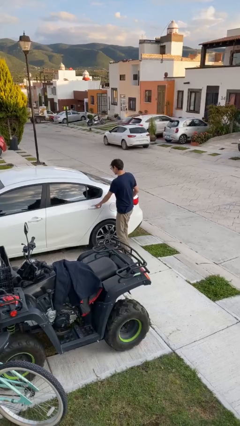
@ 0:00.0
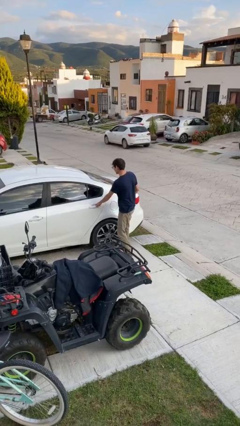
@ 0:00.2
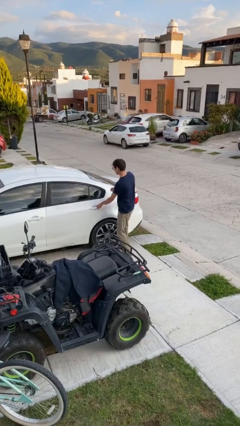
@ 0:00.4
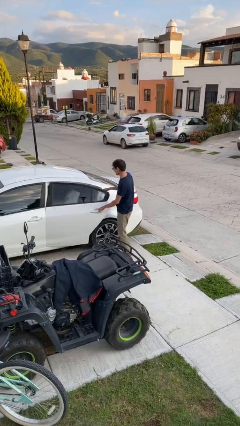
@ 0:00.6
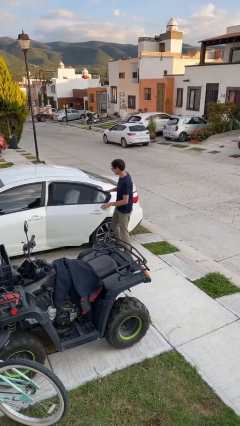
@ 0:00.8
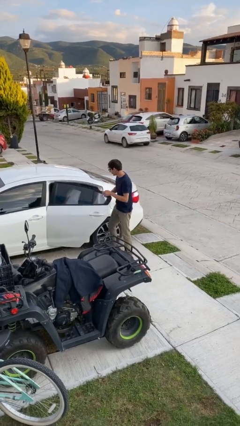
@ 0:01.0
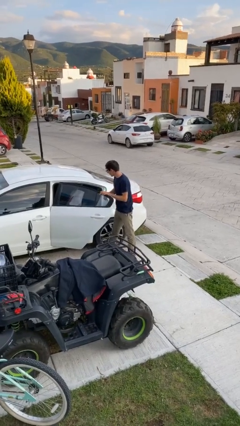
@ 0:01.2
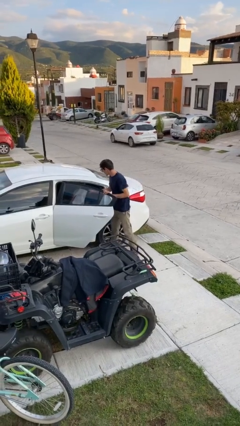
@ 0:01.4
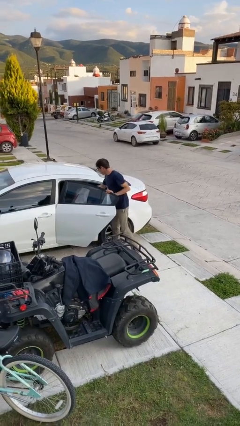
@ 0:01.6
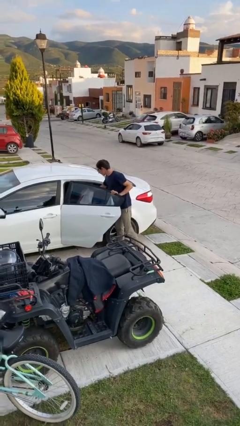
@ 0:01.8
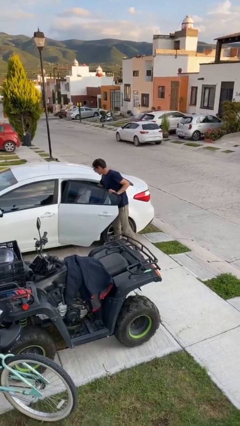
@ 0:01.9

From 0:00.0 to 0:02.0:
person opens car door

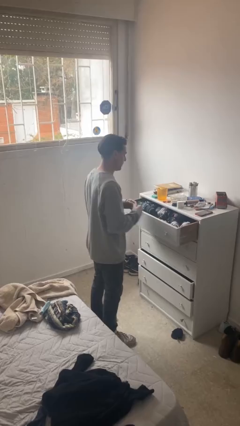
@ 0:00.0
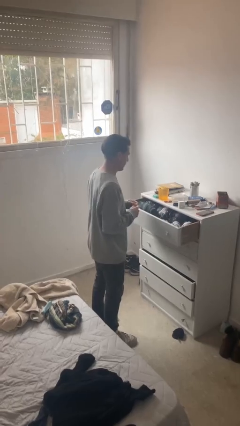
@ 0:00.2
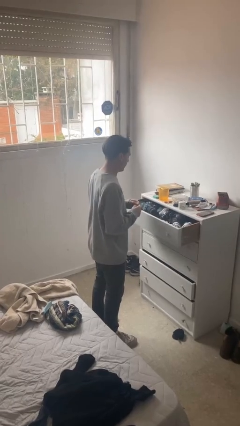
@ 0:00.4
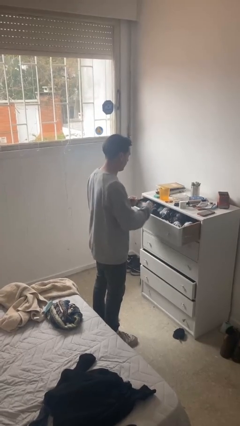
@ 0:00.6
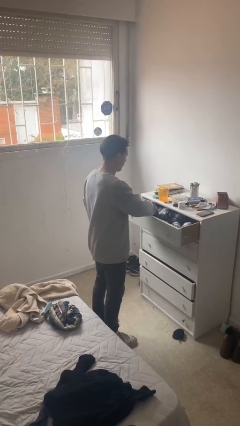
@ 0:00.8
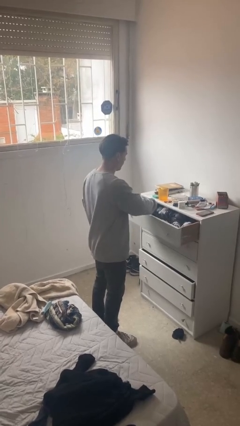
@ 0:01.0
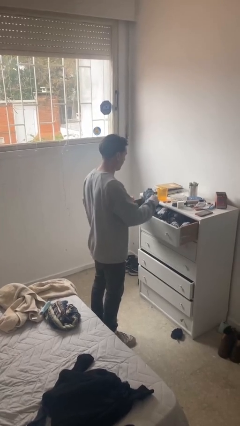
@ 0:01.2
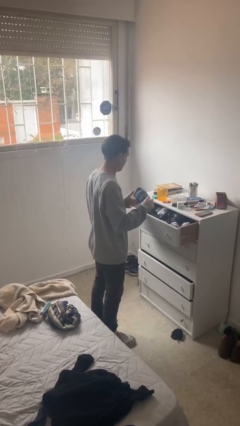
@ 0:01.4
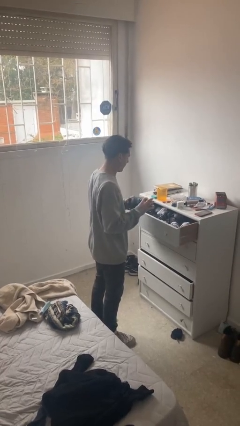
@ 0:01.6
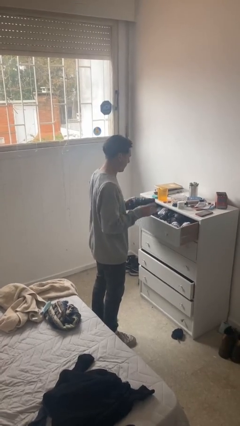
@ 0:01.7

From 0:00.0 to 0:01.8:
person takes clothes from dresser

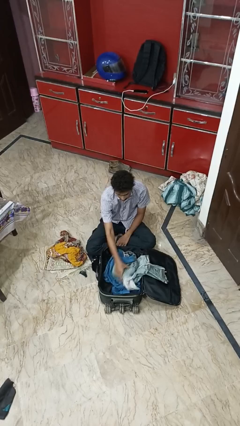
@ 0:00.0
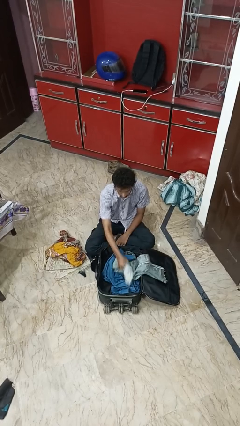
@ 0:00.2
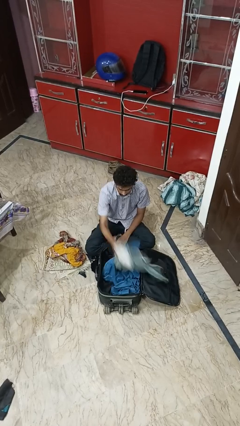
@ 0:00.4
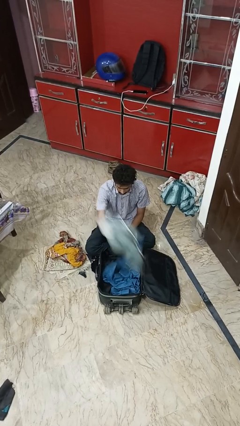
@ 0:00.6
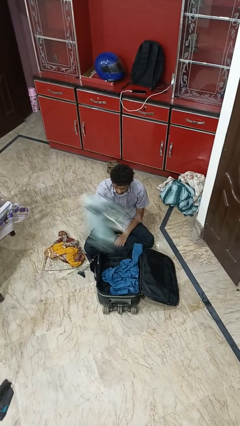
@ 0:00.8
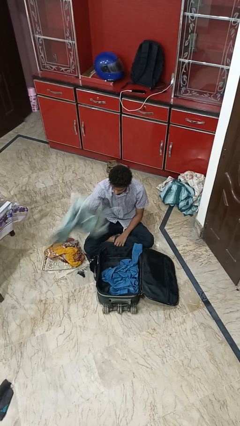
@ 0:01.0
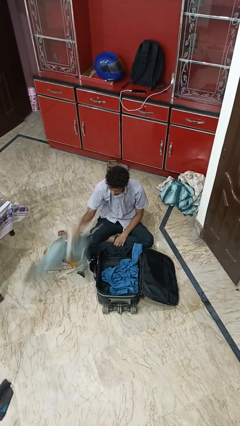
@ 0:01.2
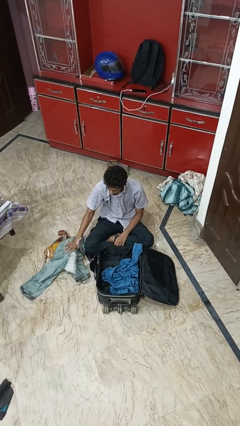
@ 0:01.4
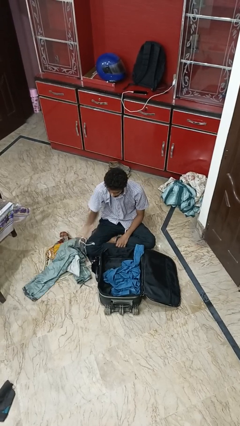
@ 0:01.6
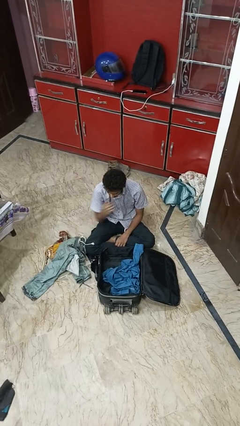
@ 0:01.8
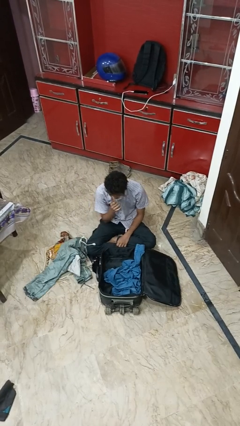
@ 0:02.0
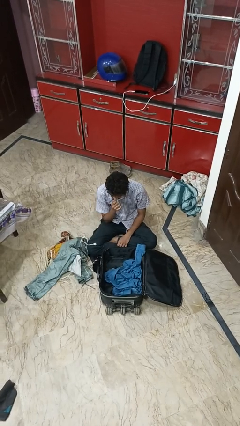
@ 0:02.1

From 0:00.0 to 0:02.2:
person unloads clothes from suitcase

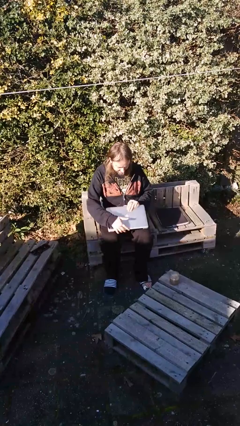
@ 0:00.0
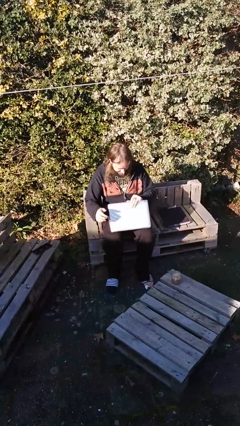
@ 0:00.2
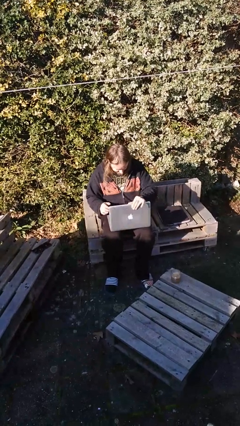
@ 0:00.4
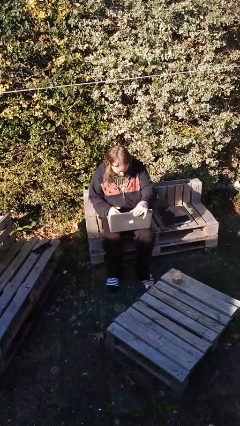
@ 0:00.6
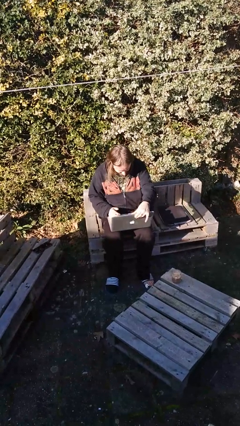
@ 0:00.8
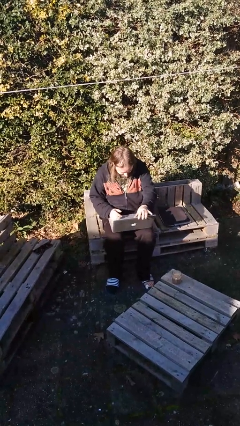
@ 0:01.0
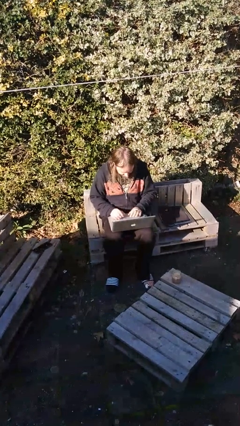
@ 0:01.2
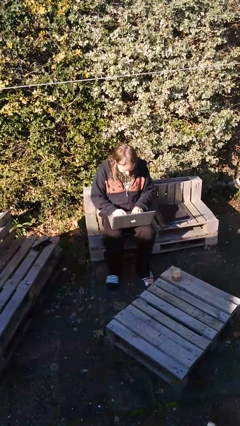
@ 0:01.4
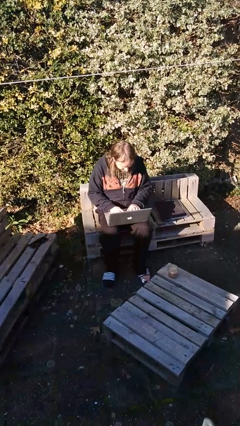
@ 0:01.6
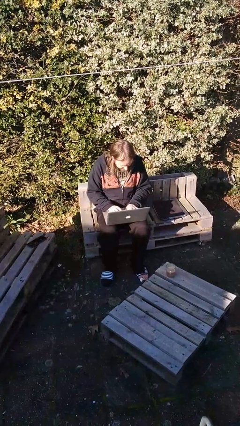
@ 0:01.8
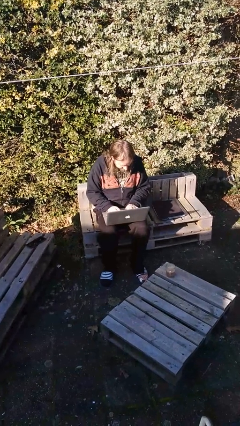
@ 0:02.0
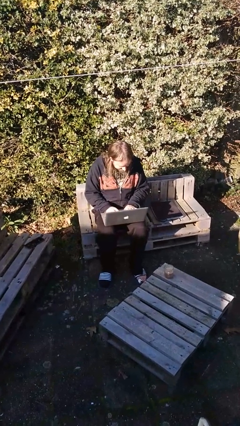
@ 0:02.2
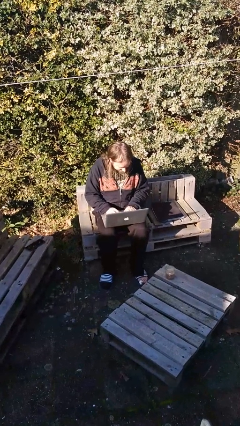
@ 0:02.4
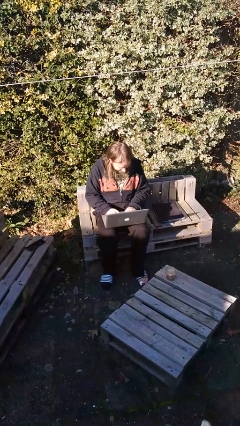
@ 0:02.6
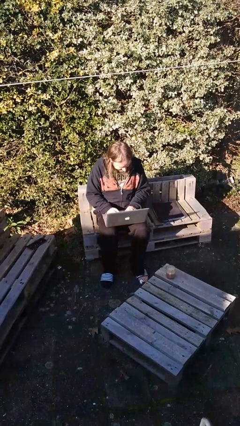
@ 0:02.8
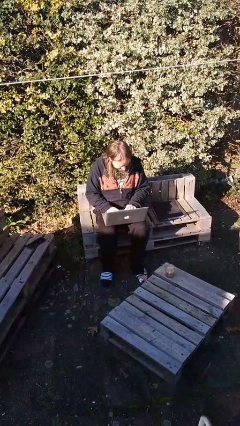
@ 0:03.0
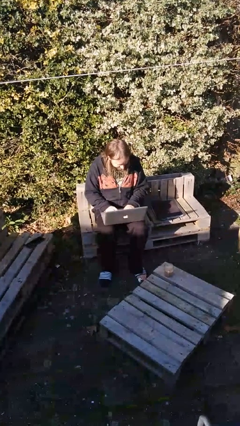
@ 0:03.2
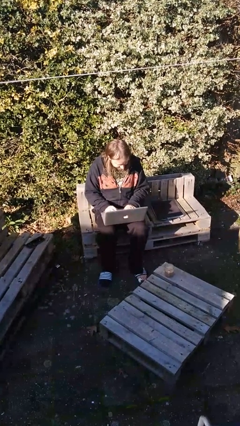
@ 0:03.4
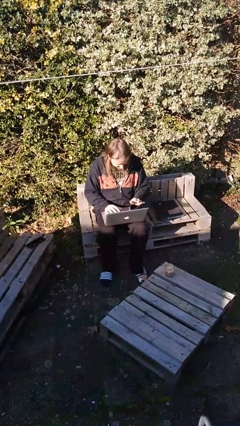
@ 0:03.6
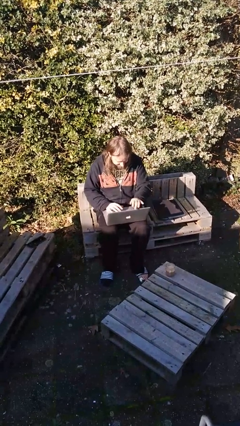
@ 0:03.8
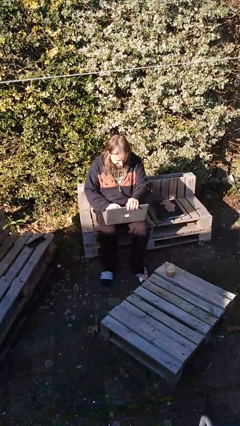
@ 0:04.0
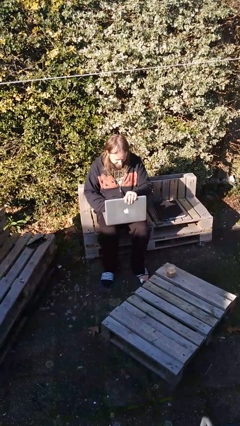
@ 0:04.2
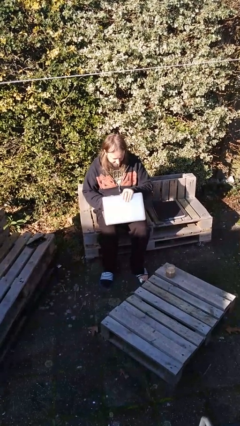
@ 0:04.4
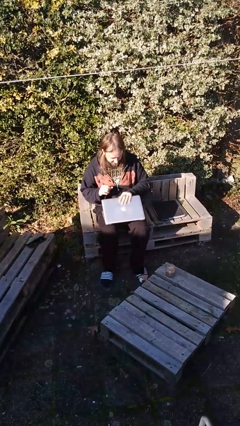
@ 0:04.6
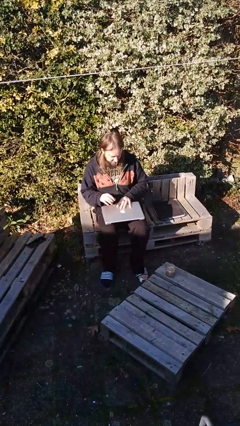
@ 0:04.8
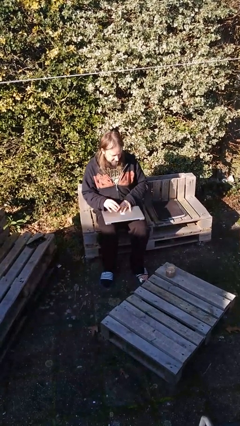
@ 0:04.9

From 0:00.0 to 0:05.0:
person interacts with laptop

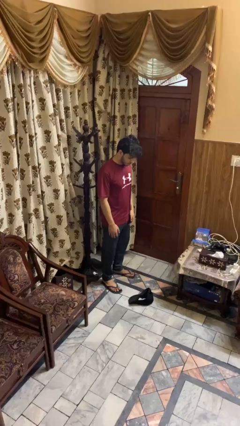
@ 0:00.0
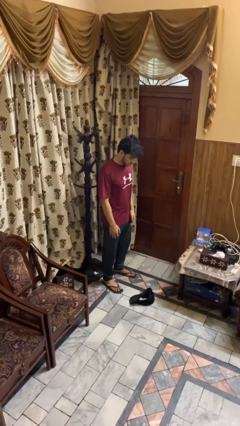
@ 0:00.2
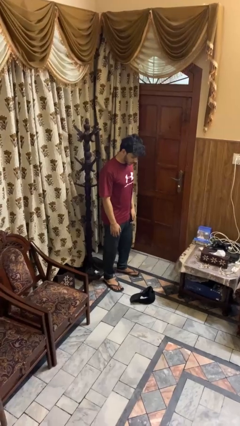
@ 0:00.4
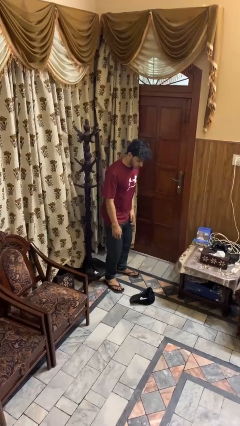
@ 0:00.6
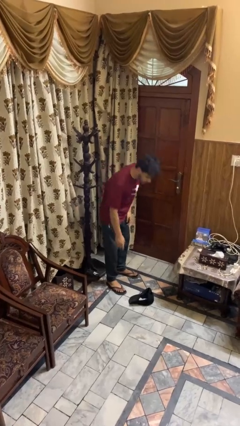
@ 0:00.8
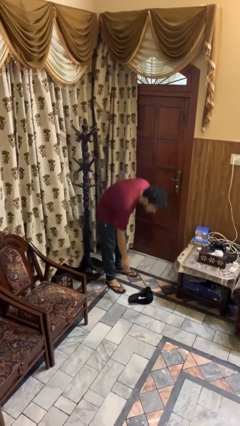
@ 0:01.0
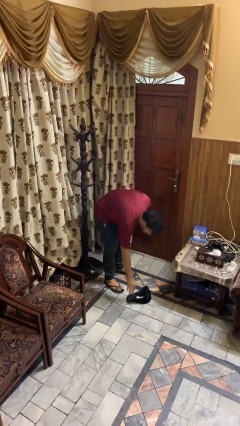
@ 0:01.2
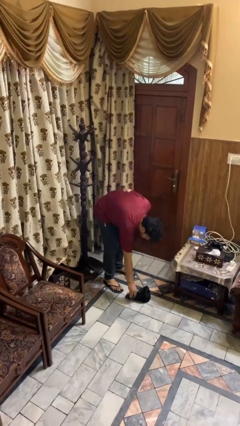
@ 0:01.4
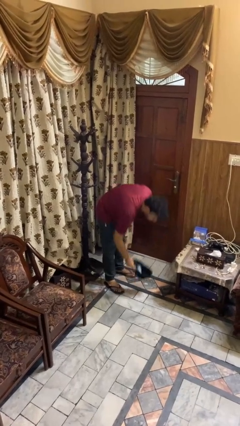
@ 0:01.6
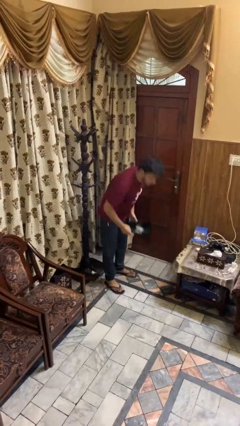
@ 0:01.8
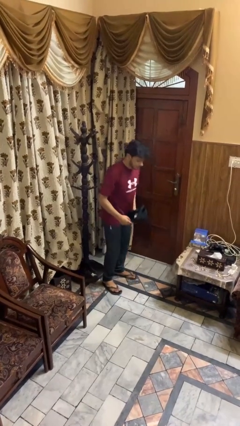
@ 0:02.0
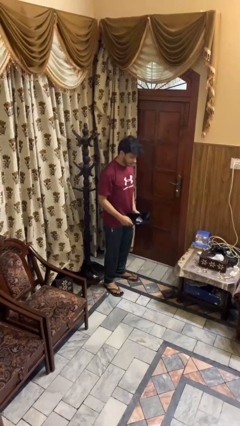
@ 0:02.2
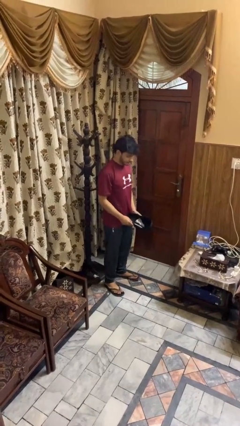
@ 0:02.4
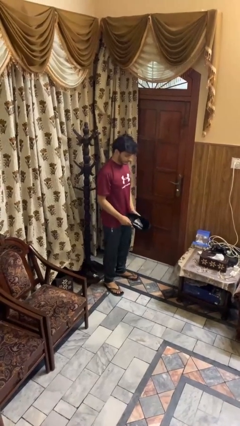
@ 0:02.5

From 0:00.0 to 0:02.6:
person picks up object from floor

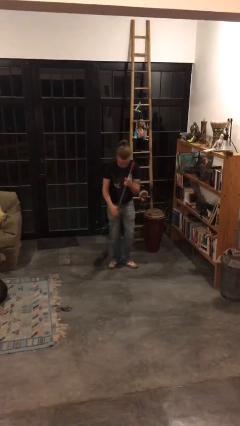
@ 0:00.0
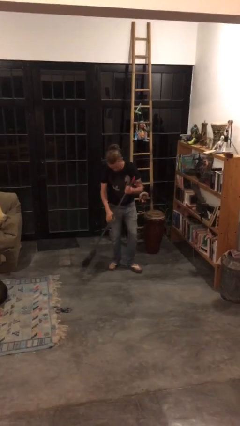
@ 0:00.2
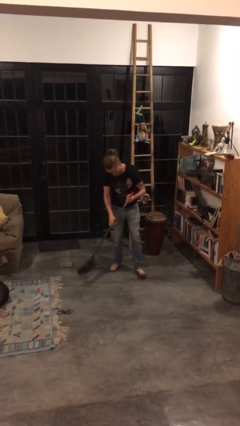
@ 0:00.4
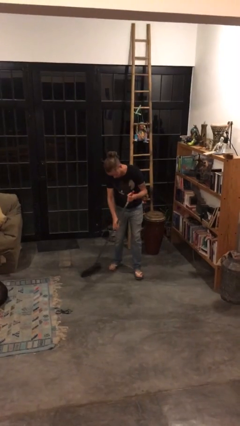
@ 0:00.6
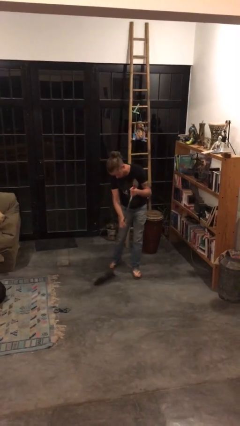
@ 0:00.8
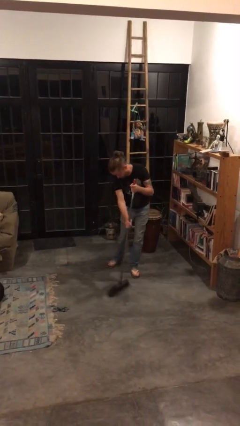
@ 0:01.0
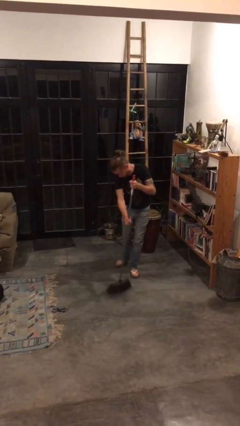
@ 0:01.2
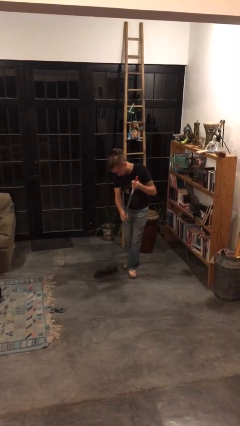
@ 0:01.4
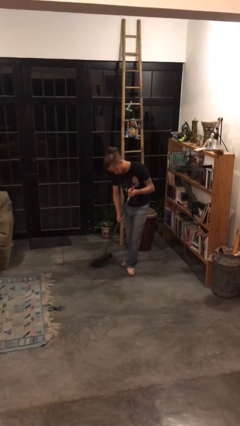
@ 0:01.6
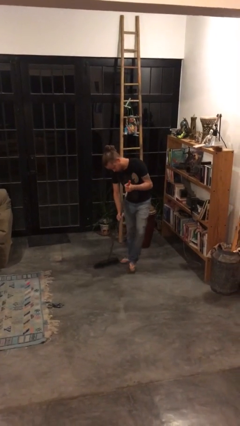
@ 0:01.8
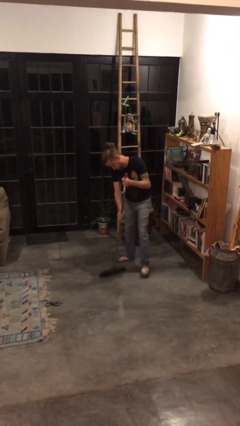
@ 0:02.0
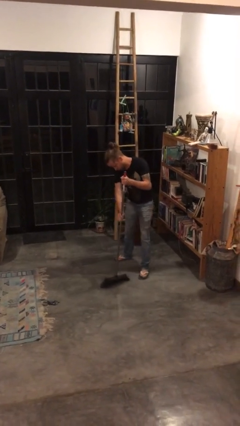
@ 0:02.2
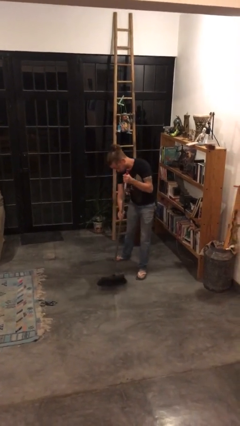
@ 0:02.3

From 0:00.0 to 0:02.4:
person sweeps floor

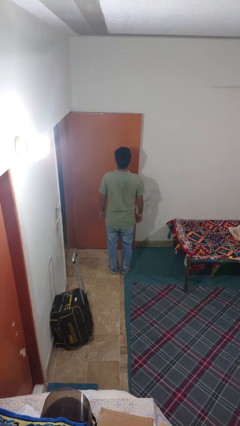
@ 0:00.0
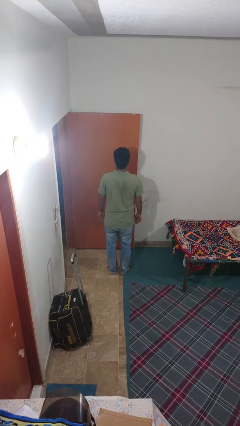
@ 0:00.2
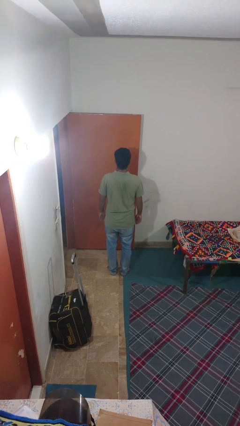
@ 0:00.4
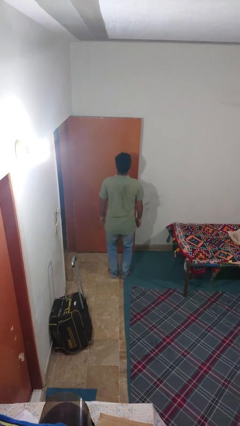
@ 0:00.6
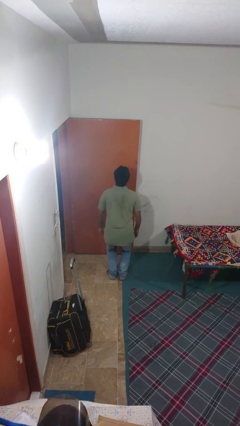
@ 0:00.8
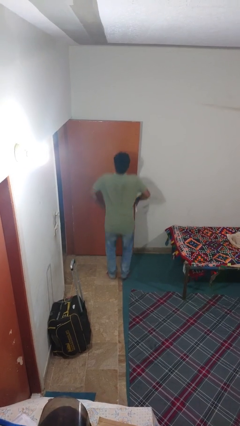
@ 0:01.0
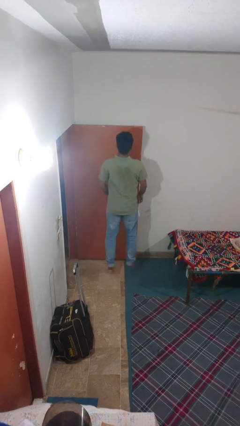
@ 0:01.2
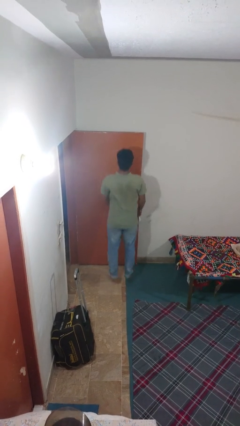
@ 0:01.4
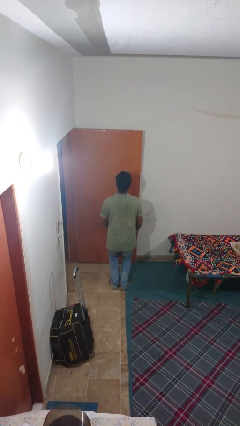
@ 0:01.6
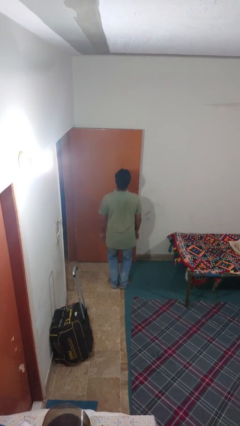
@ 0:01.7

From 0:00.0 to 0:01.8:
person jumps
